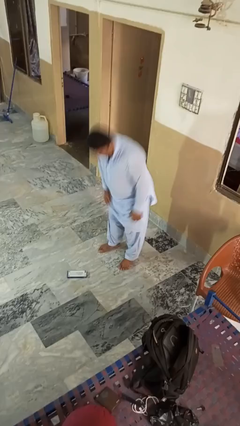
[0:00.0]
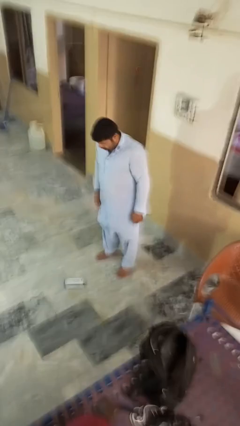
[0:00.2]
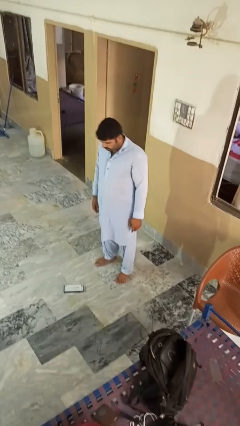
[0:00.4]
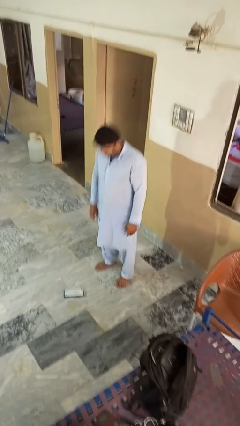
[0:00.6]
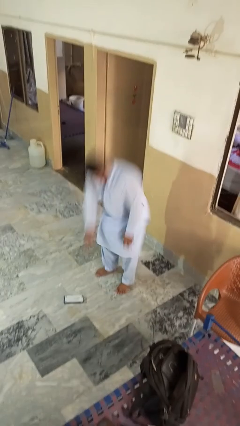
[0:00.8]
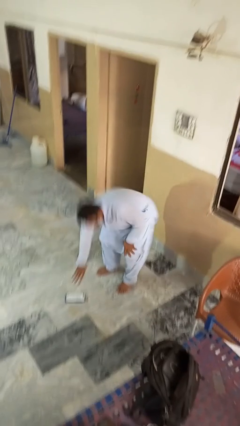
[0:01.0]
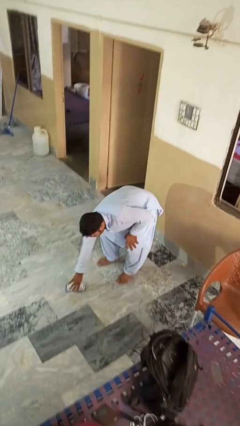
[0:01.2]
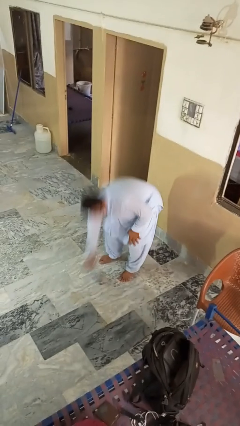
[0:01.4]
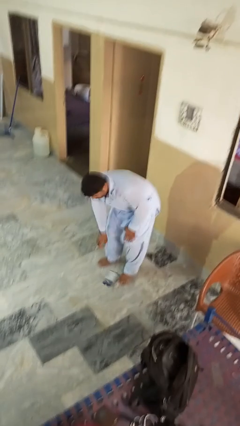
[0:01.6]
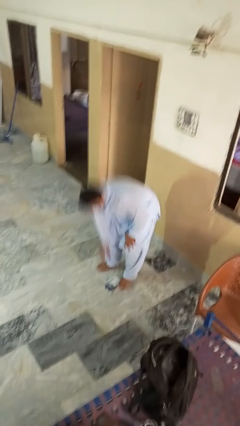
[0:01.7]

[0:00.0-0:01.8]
person picks up object from floor

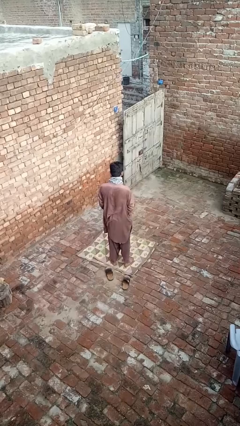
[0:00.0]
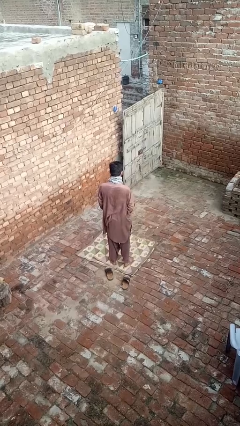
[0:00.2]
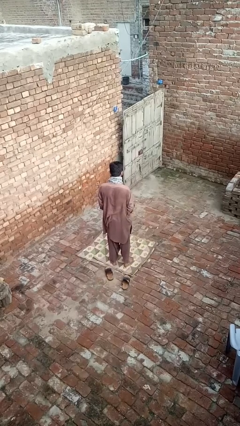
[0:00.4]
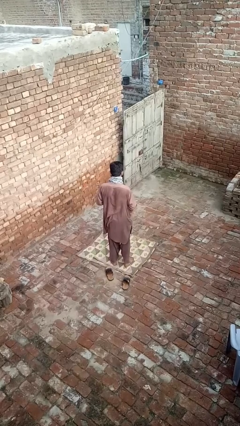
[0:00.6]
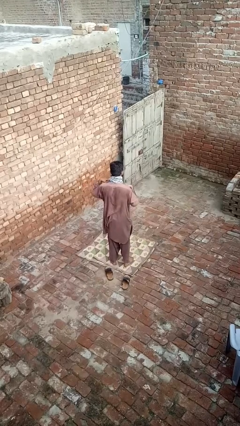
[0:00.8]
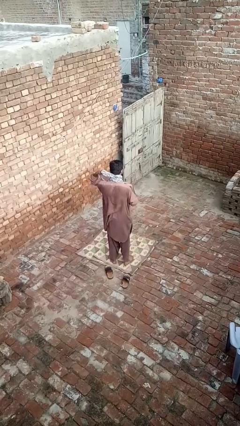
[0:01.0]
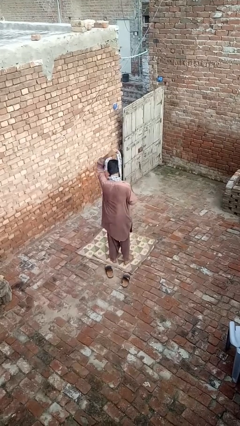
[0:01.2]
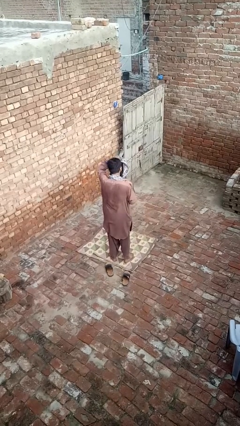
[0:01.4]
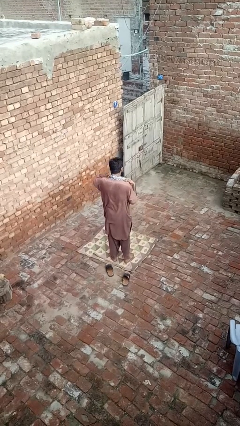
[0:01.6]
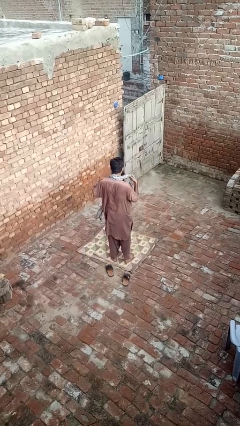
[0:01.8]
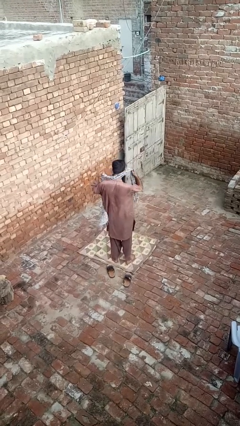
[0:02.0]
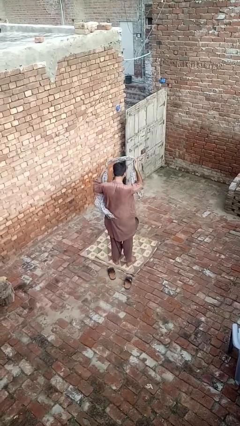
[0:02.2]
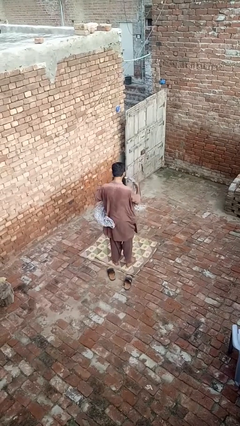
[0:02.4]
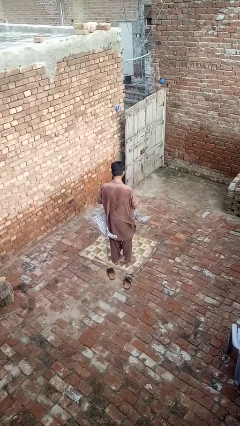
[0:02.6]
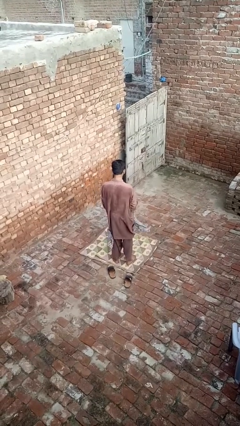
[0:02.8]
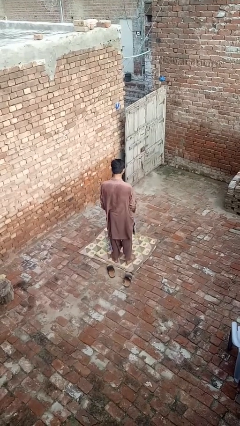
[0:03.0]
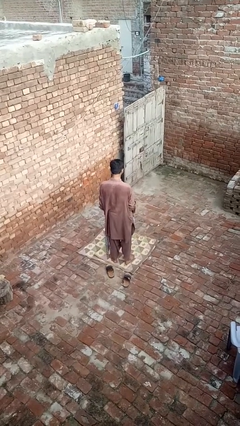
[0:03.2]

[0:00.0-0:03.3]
person takes off scarf

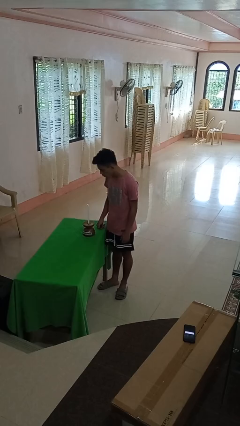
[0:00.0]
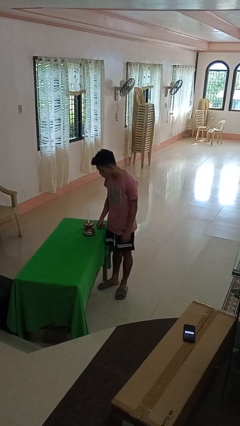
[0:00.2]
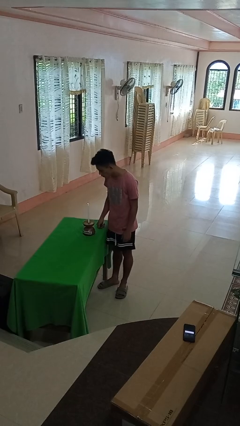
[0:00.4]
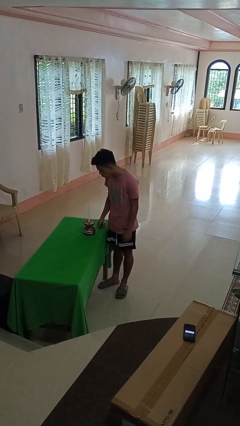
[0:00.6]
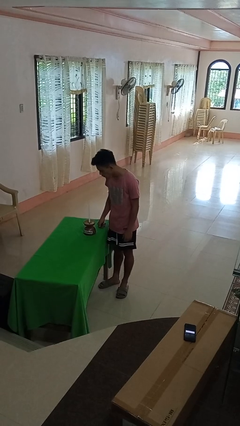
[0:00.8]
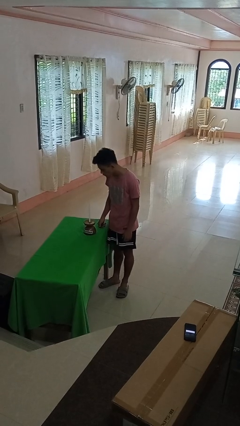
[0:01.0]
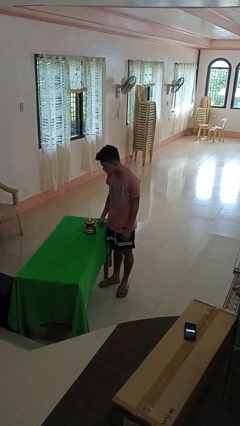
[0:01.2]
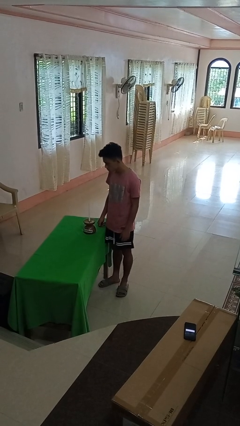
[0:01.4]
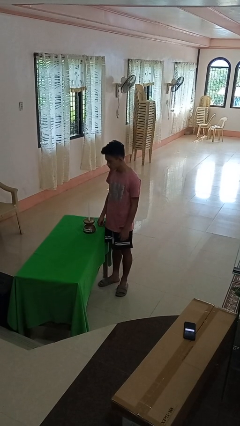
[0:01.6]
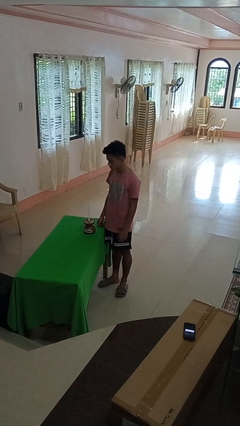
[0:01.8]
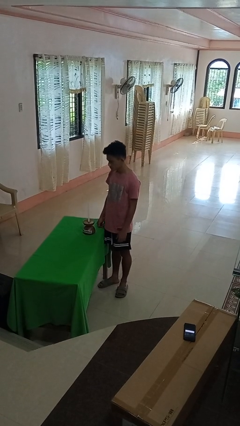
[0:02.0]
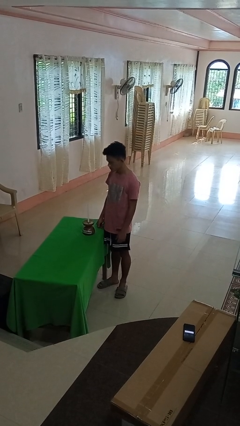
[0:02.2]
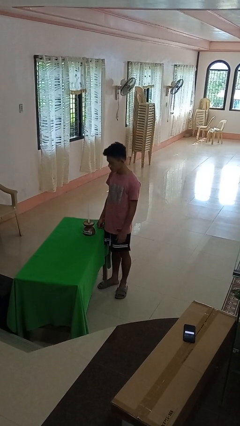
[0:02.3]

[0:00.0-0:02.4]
person extinguishes candle

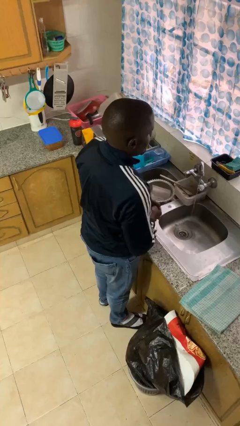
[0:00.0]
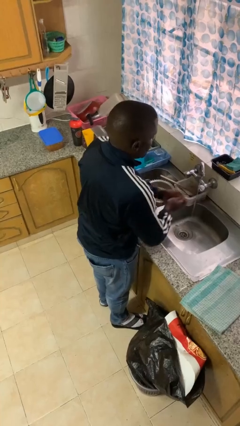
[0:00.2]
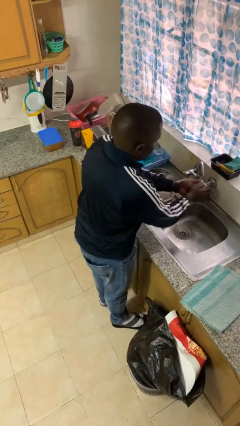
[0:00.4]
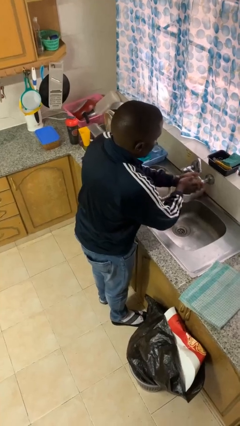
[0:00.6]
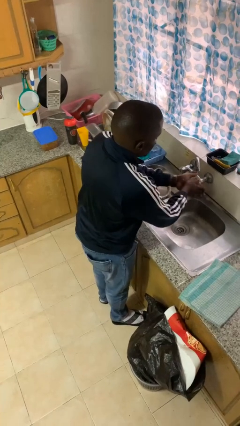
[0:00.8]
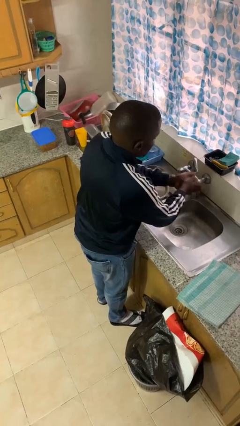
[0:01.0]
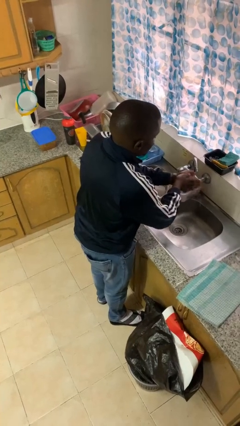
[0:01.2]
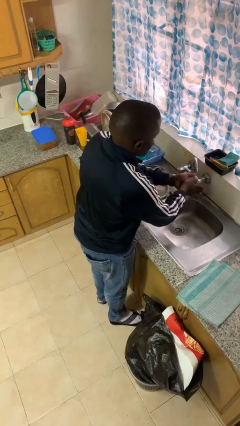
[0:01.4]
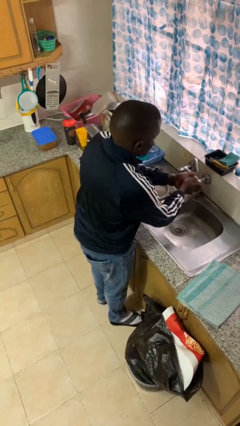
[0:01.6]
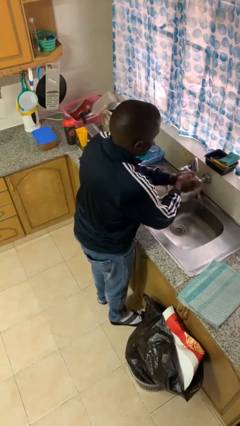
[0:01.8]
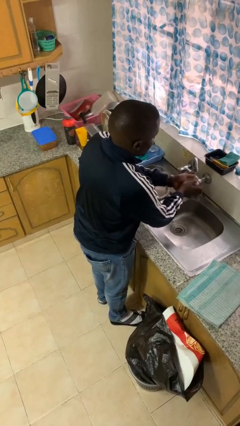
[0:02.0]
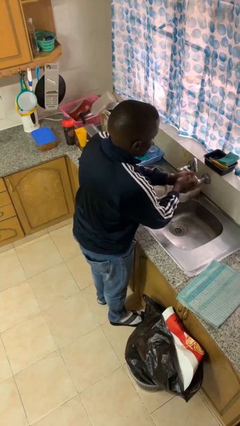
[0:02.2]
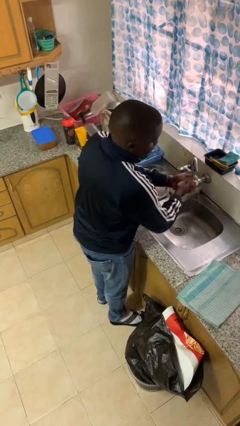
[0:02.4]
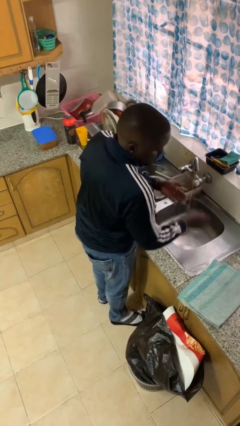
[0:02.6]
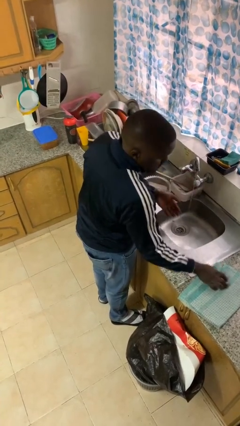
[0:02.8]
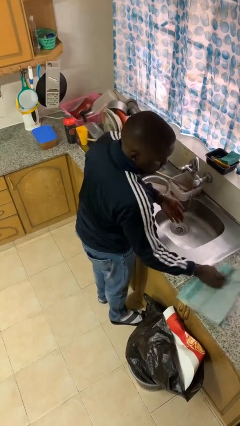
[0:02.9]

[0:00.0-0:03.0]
person washes hands

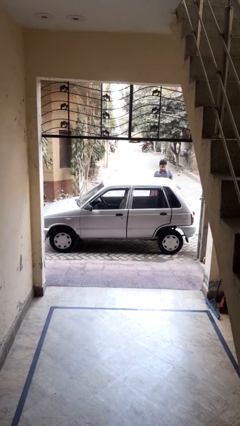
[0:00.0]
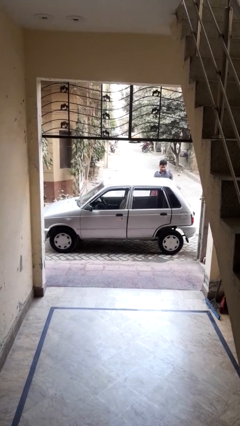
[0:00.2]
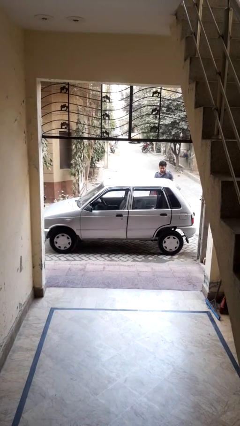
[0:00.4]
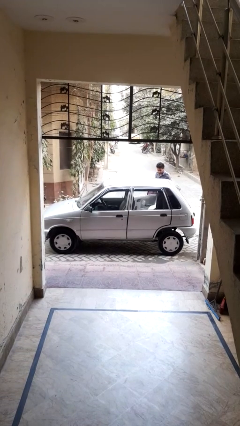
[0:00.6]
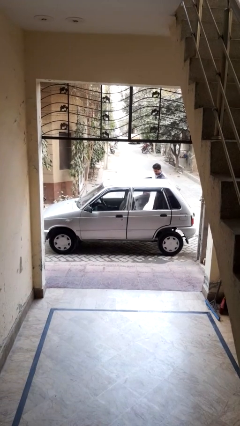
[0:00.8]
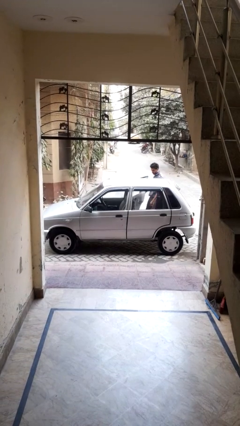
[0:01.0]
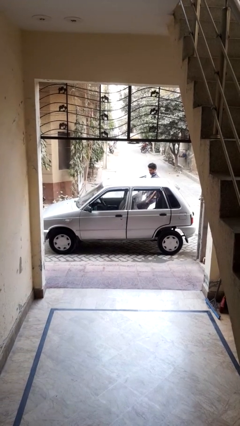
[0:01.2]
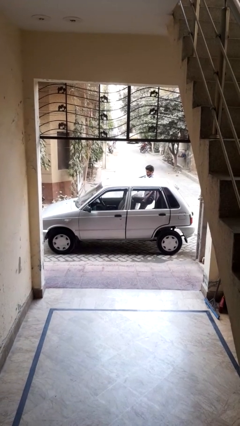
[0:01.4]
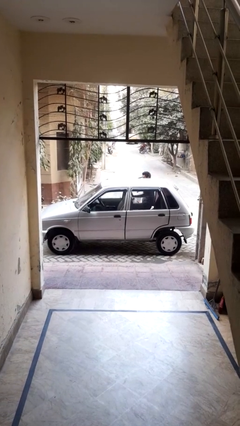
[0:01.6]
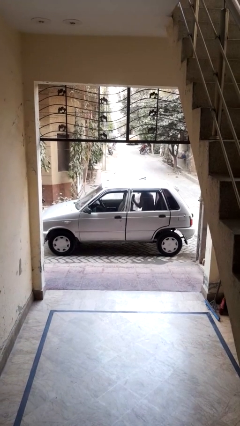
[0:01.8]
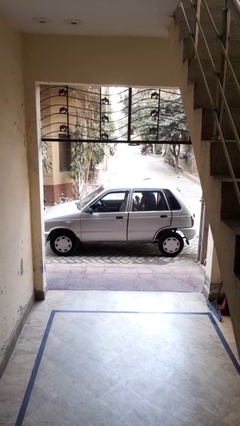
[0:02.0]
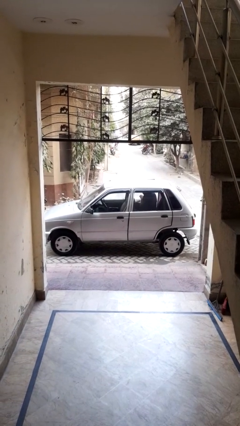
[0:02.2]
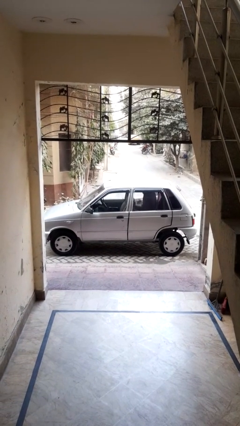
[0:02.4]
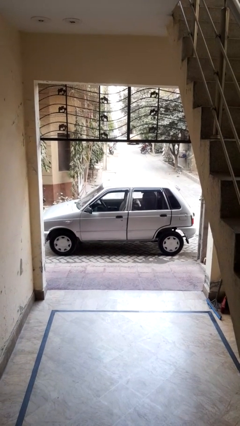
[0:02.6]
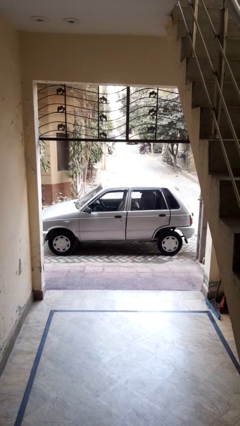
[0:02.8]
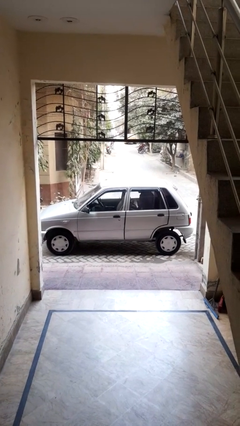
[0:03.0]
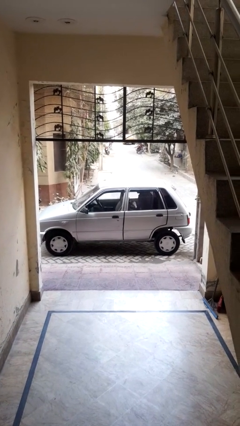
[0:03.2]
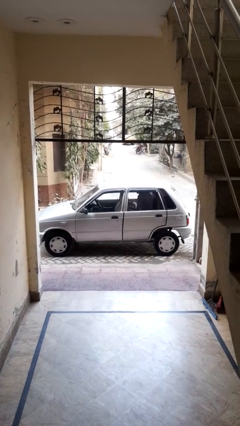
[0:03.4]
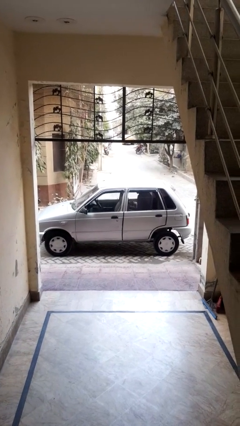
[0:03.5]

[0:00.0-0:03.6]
car picks up person

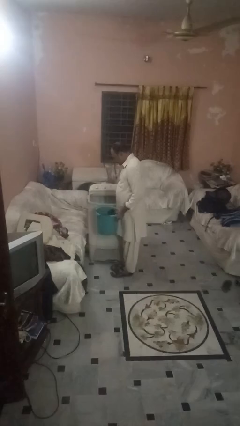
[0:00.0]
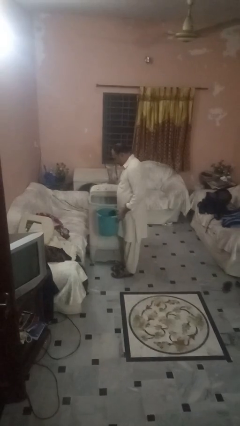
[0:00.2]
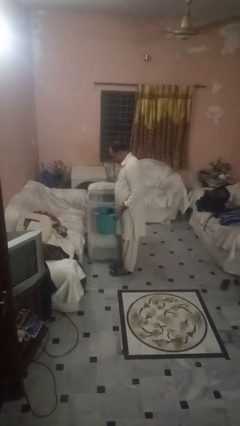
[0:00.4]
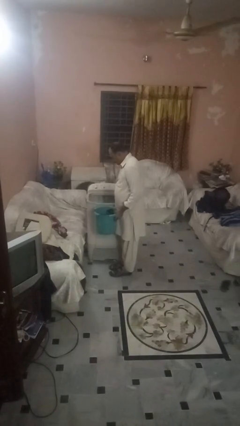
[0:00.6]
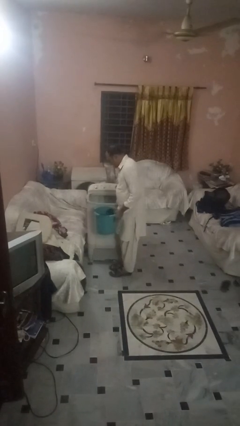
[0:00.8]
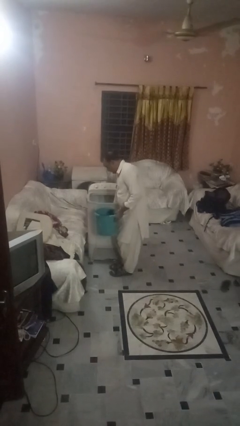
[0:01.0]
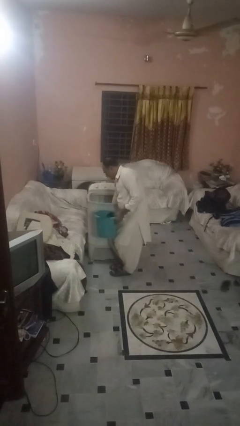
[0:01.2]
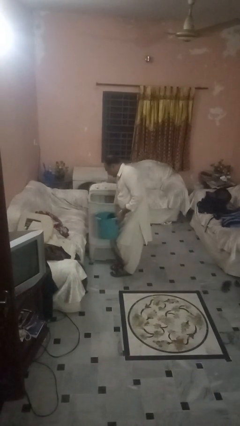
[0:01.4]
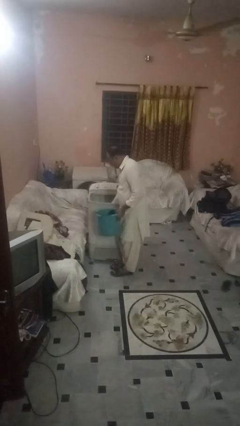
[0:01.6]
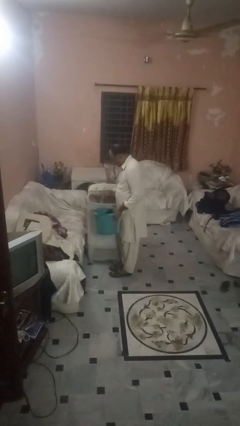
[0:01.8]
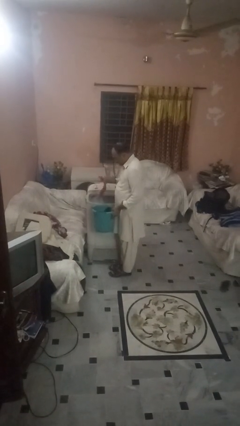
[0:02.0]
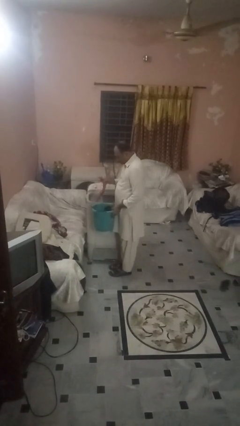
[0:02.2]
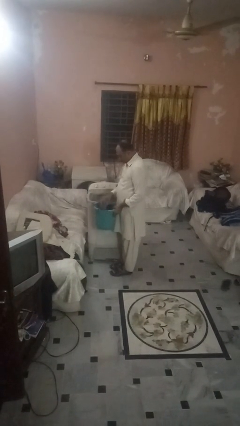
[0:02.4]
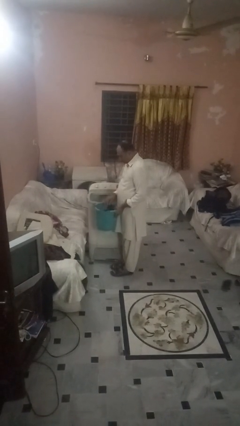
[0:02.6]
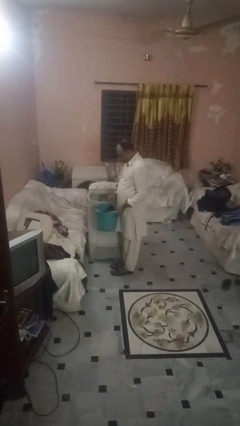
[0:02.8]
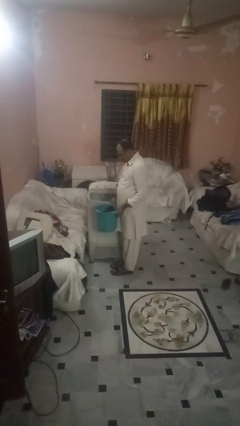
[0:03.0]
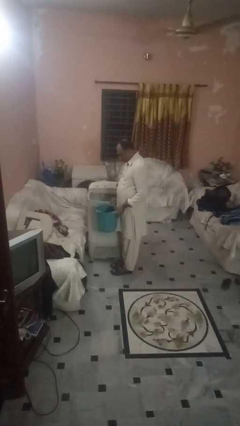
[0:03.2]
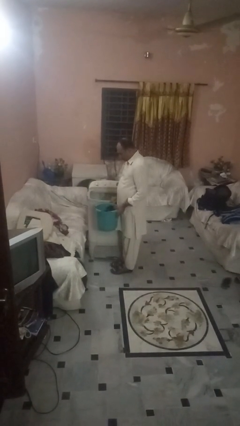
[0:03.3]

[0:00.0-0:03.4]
person unloads clotheswasher
